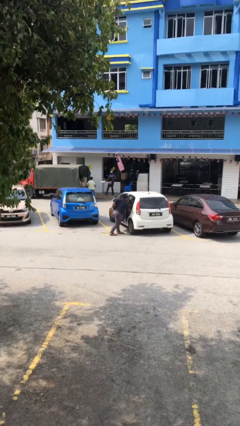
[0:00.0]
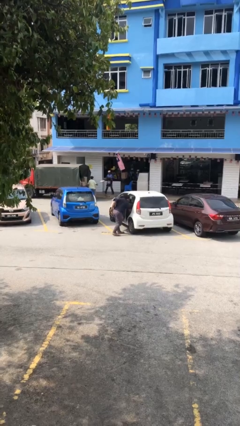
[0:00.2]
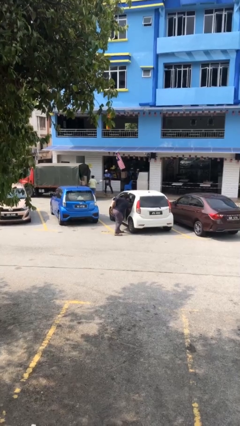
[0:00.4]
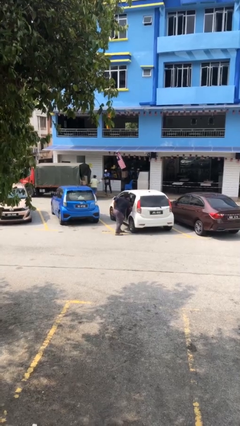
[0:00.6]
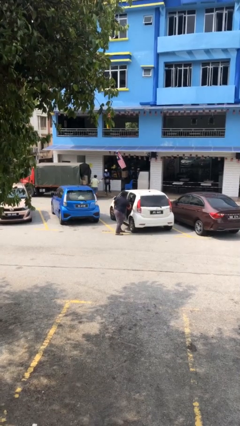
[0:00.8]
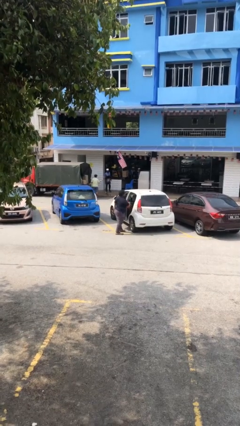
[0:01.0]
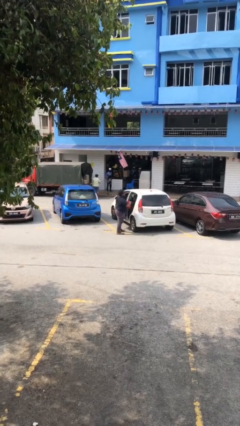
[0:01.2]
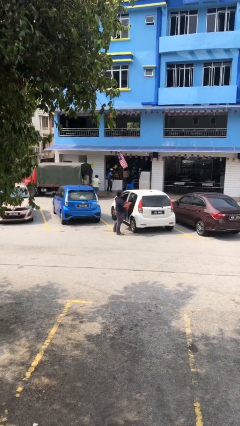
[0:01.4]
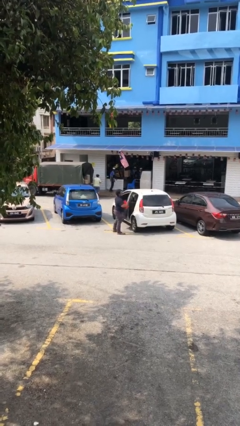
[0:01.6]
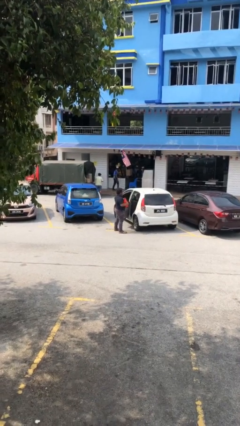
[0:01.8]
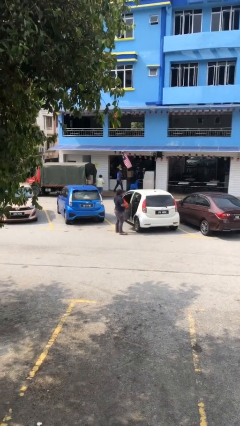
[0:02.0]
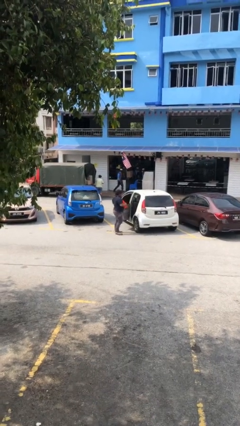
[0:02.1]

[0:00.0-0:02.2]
person unloads car

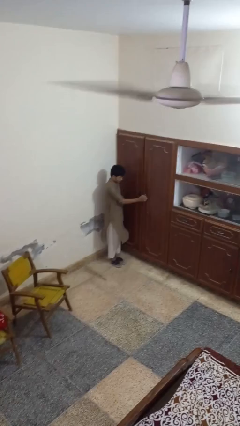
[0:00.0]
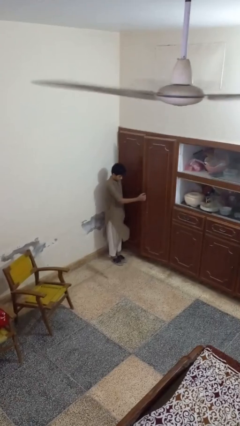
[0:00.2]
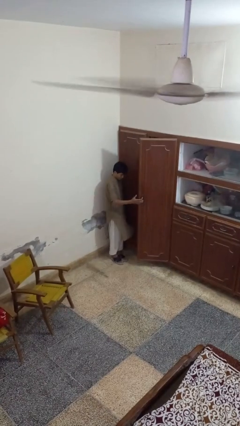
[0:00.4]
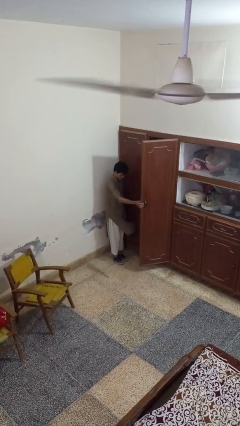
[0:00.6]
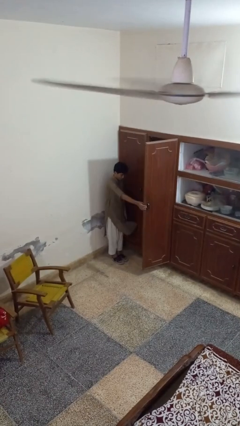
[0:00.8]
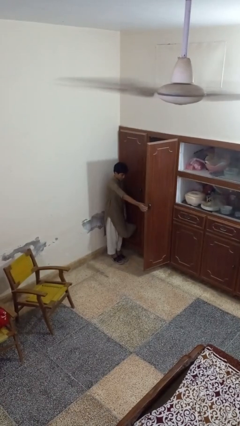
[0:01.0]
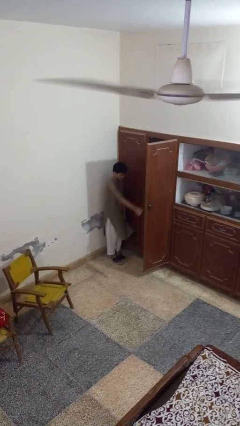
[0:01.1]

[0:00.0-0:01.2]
person opens closet door

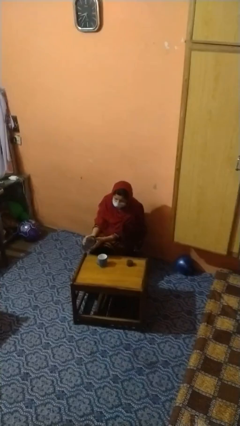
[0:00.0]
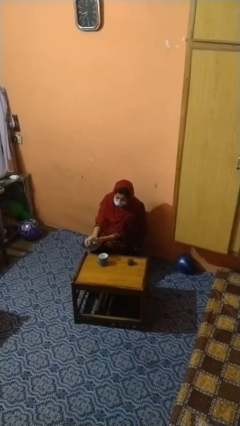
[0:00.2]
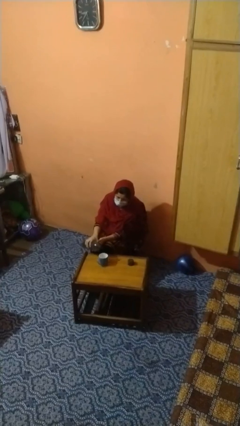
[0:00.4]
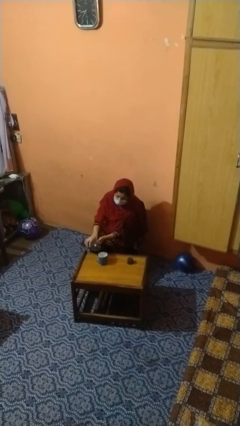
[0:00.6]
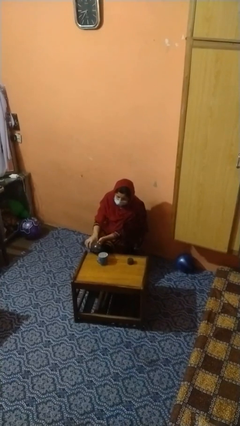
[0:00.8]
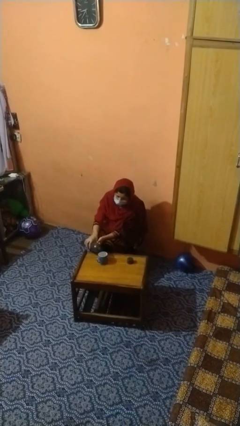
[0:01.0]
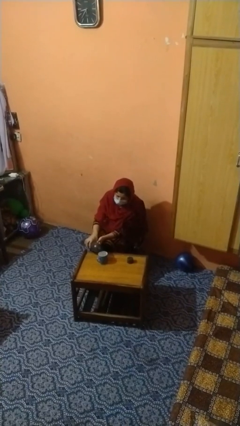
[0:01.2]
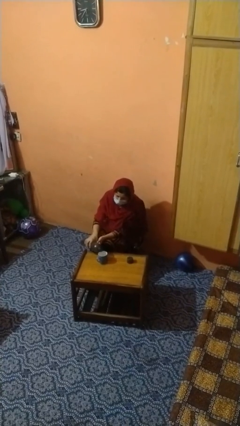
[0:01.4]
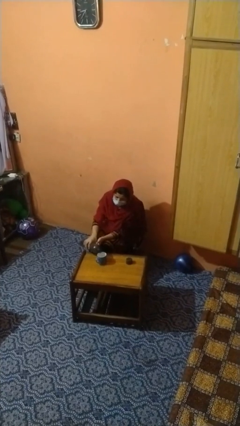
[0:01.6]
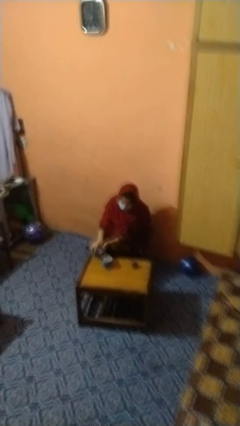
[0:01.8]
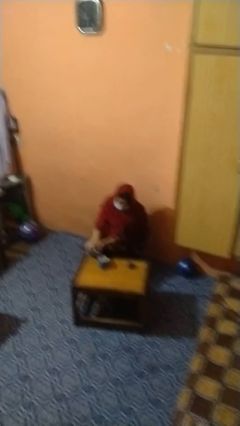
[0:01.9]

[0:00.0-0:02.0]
person pours liquid into cup

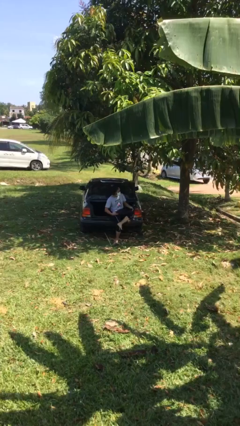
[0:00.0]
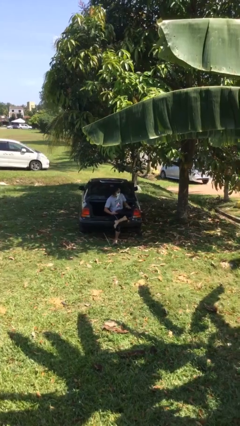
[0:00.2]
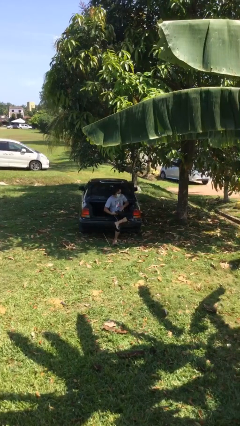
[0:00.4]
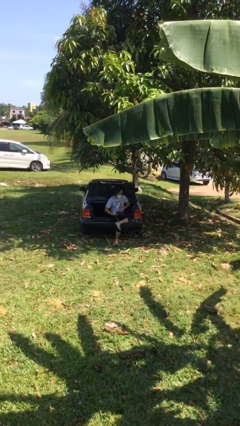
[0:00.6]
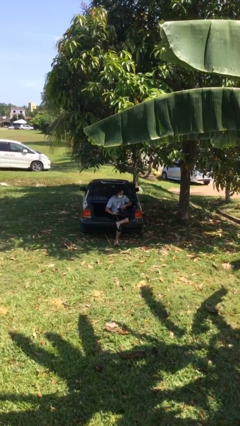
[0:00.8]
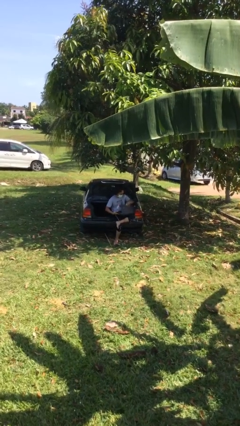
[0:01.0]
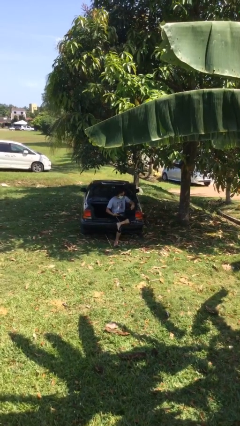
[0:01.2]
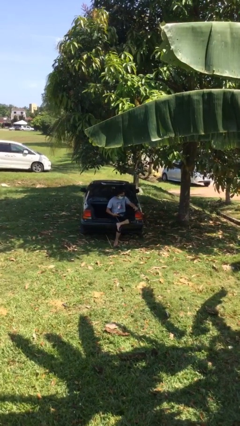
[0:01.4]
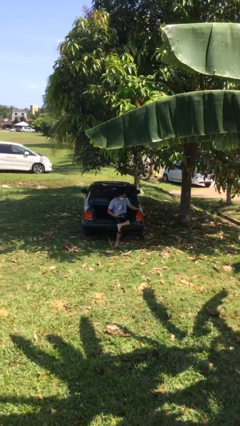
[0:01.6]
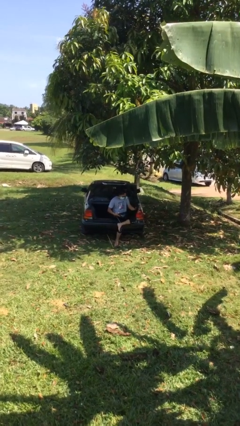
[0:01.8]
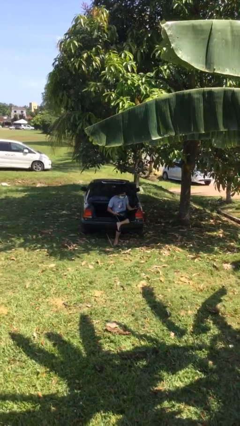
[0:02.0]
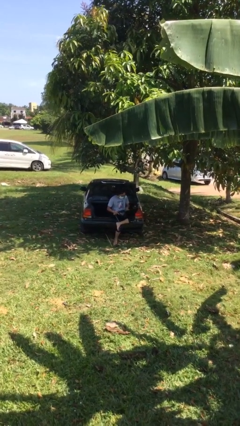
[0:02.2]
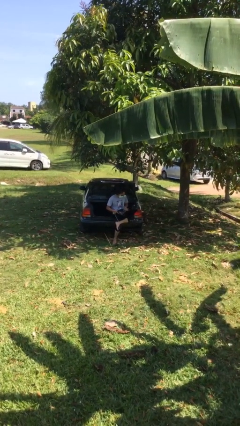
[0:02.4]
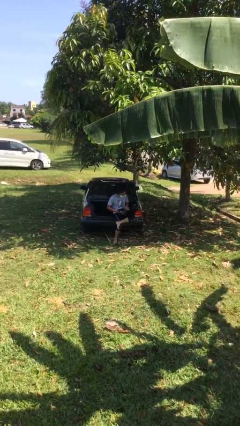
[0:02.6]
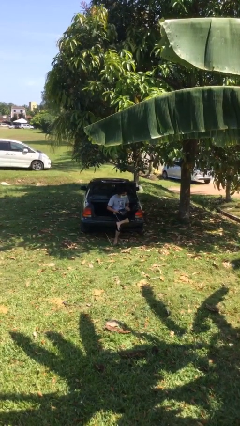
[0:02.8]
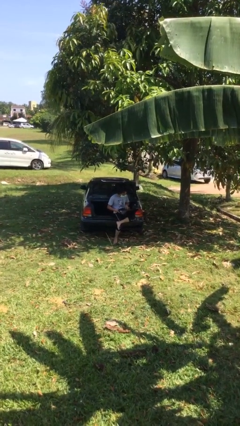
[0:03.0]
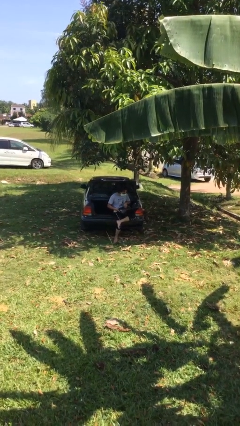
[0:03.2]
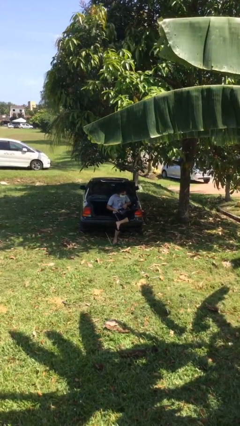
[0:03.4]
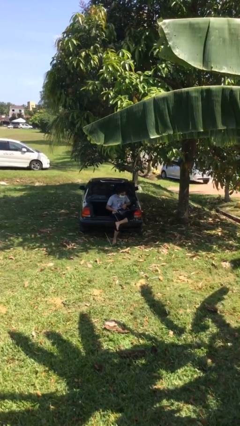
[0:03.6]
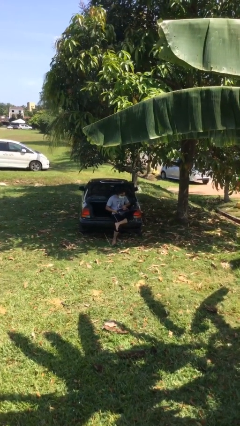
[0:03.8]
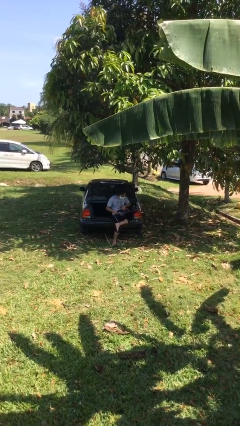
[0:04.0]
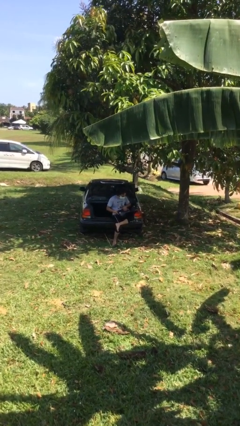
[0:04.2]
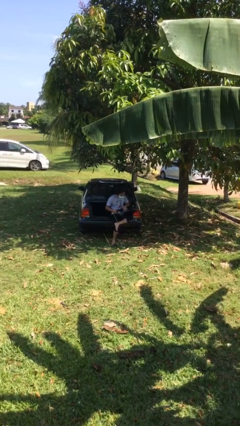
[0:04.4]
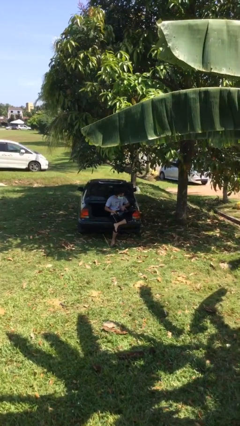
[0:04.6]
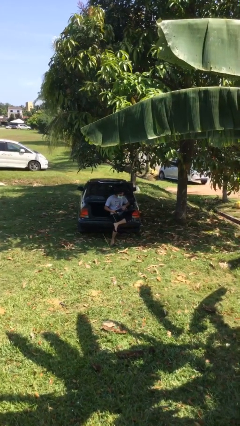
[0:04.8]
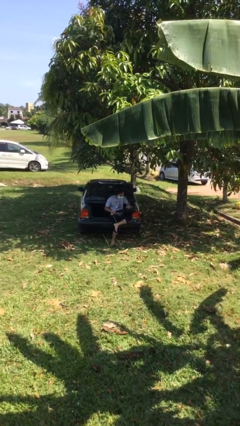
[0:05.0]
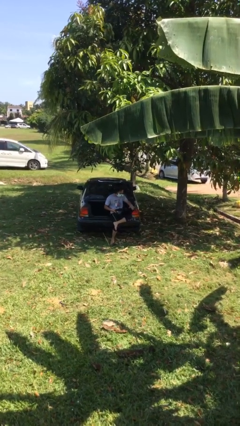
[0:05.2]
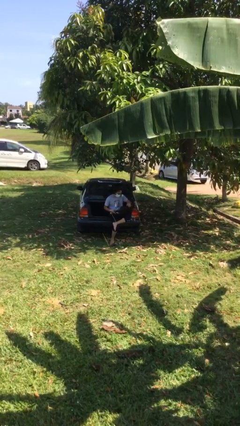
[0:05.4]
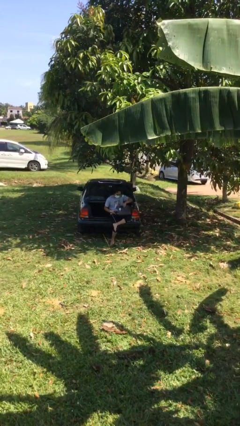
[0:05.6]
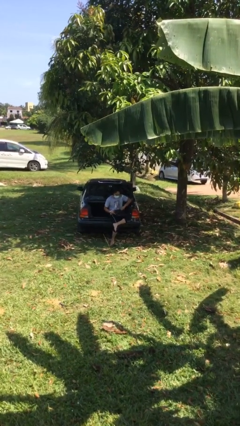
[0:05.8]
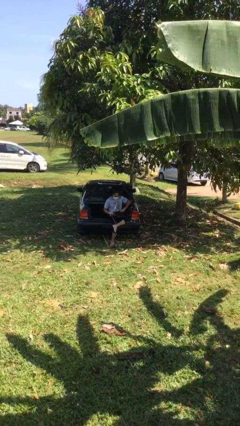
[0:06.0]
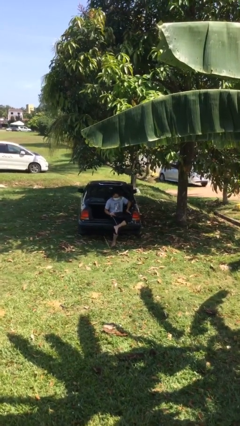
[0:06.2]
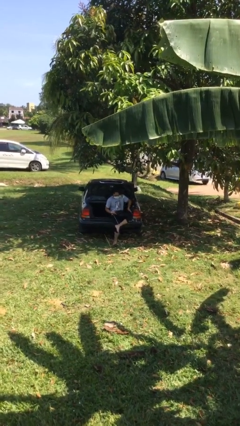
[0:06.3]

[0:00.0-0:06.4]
person interacts with laptop

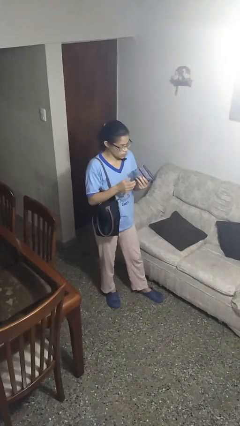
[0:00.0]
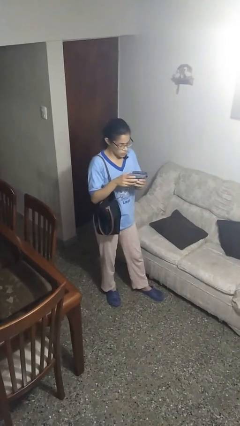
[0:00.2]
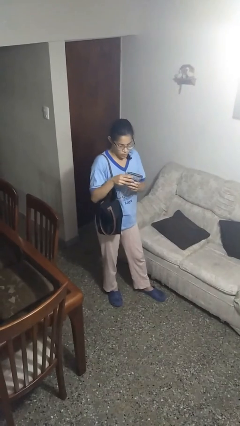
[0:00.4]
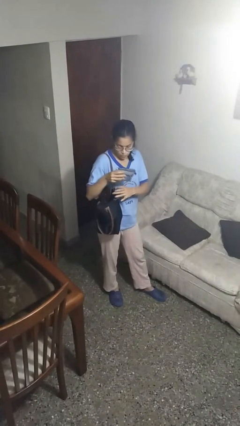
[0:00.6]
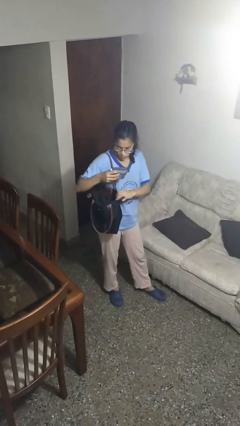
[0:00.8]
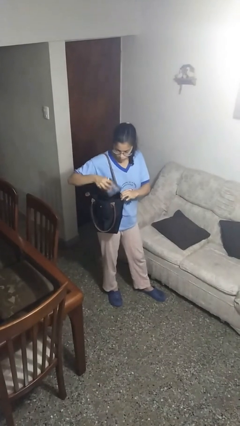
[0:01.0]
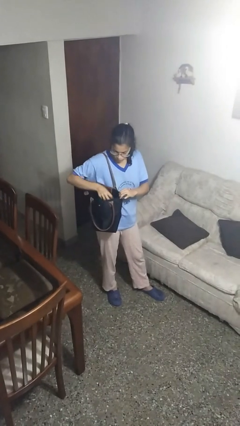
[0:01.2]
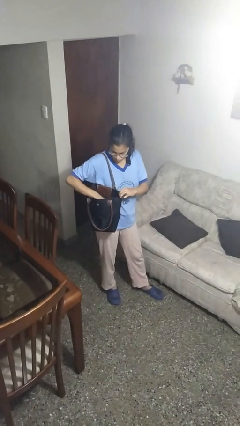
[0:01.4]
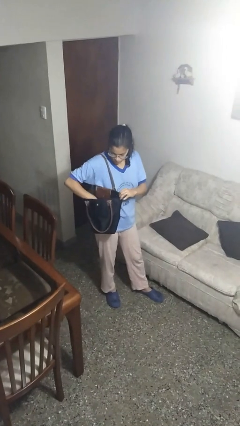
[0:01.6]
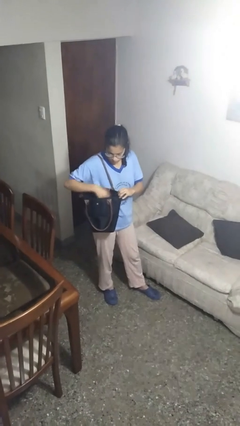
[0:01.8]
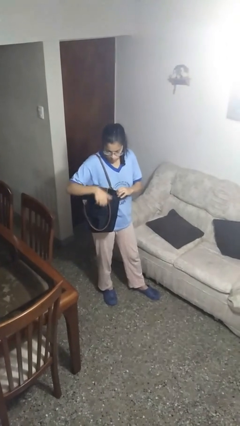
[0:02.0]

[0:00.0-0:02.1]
person puts object into purse

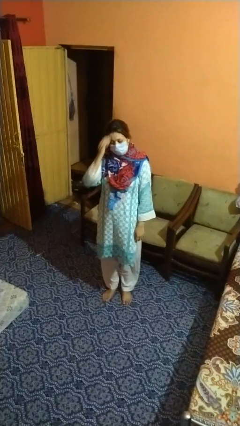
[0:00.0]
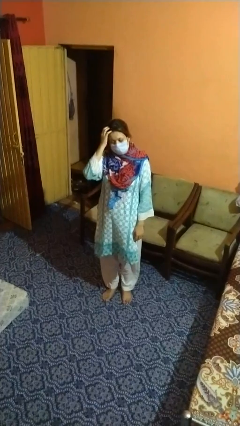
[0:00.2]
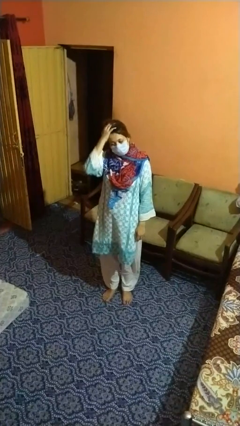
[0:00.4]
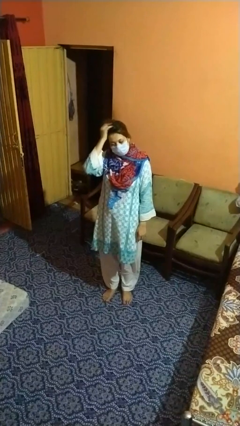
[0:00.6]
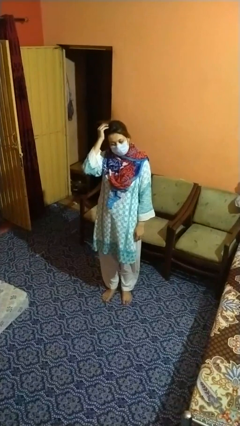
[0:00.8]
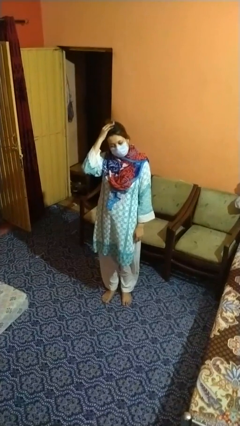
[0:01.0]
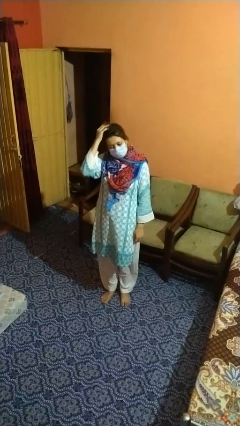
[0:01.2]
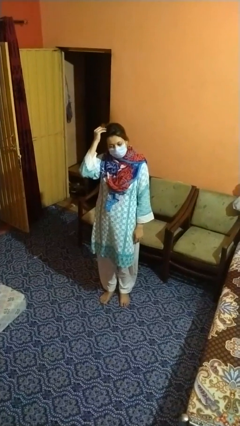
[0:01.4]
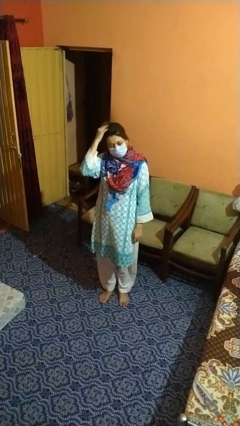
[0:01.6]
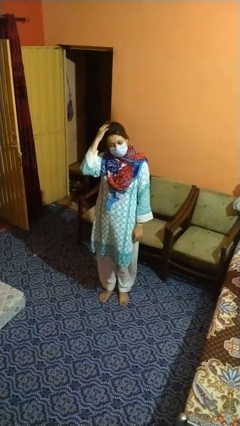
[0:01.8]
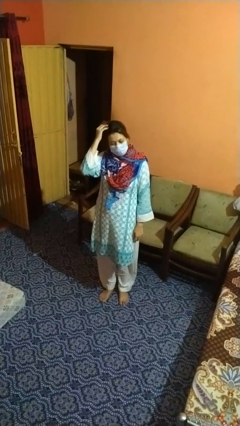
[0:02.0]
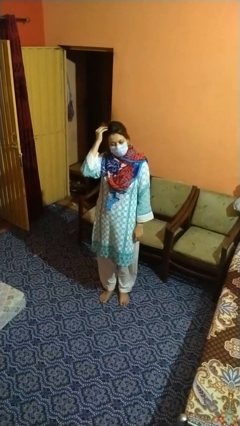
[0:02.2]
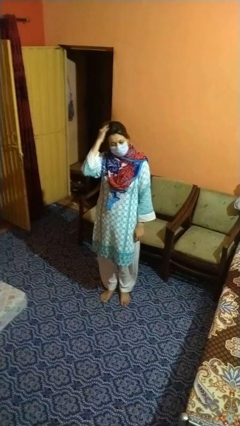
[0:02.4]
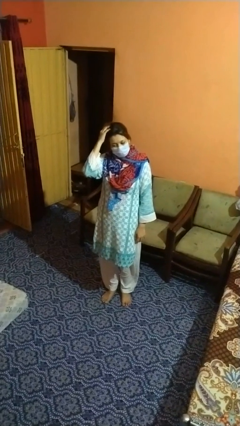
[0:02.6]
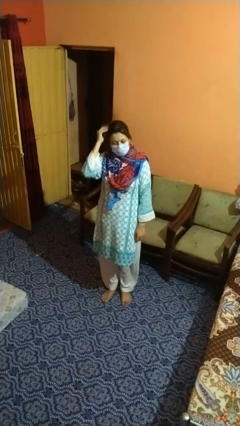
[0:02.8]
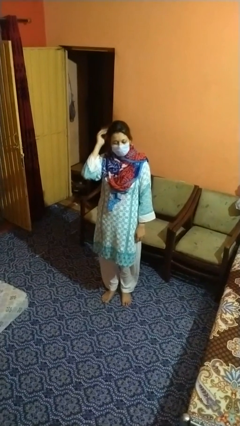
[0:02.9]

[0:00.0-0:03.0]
person strokes hair

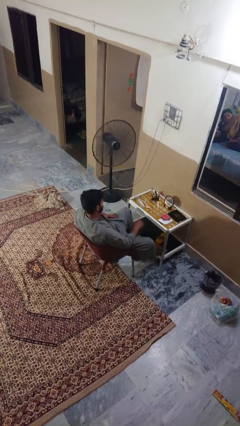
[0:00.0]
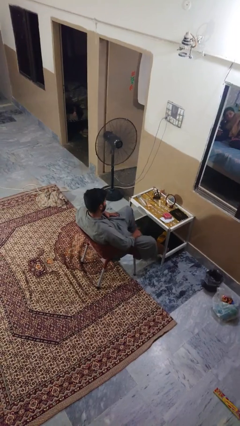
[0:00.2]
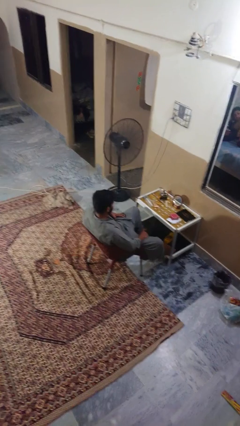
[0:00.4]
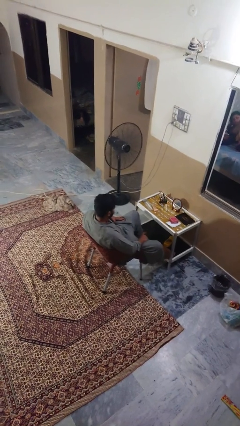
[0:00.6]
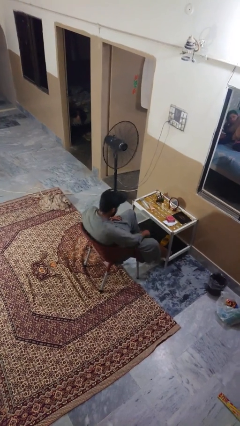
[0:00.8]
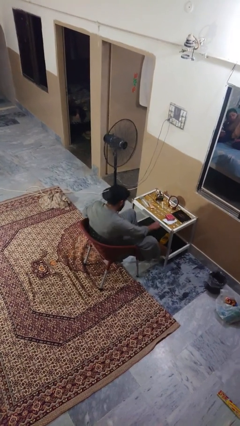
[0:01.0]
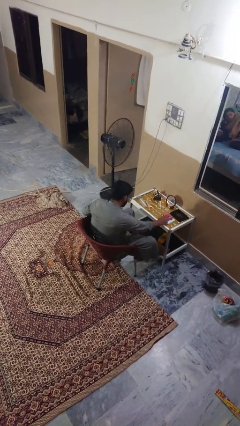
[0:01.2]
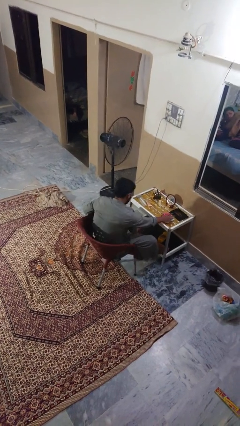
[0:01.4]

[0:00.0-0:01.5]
person picks up object from table
